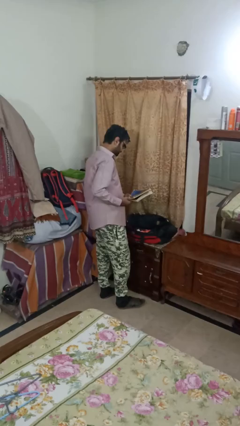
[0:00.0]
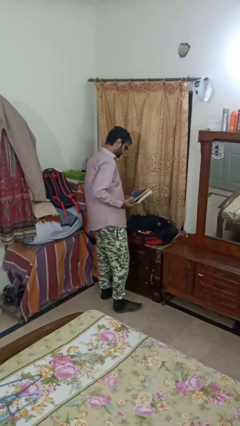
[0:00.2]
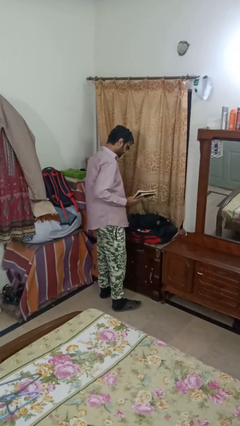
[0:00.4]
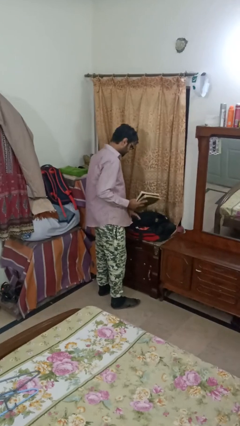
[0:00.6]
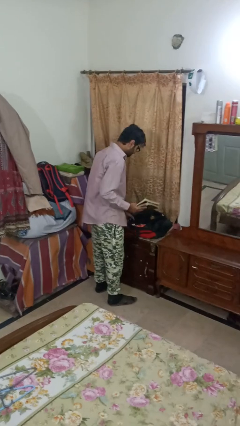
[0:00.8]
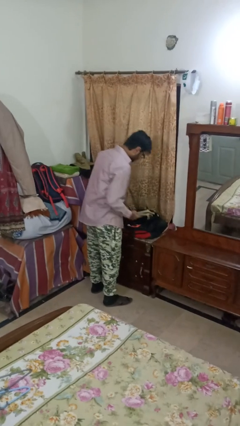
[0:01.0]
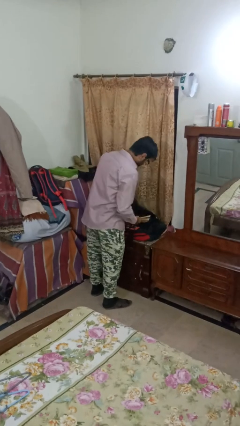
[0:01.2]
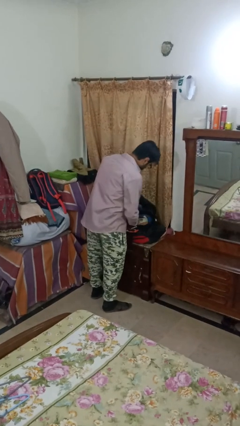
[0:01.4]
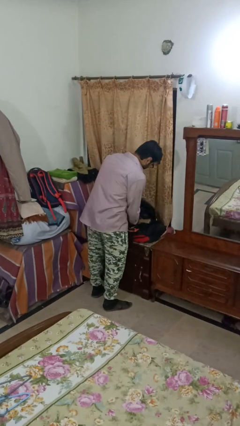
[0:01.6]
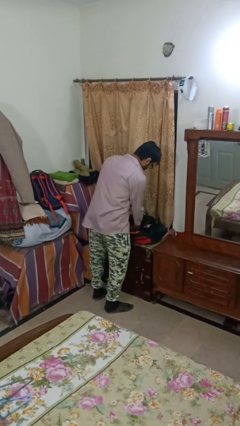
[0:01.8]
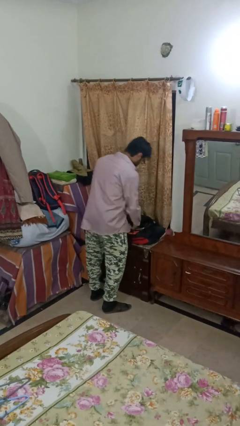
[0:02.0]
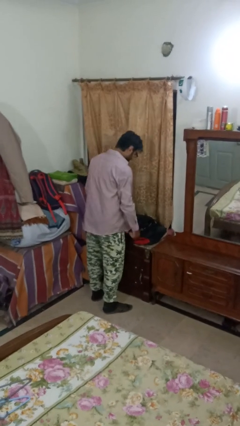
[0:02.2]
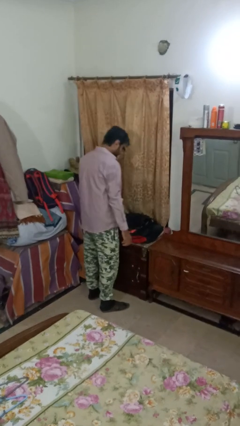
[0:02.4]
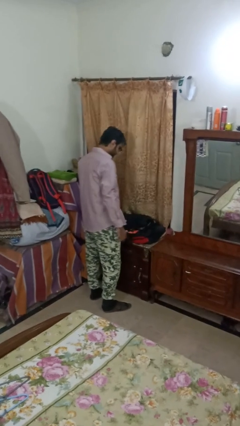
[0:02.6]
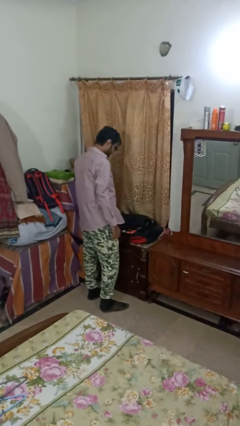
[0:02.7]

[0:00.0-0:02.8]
person puts object into bag

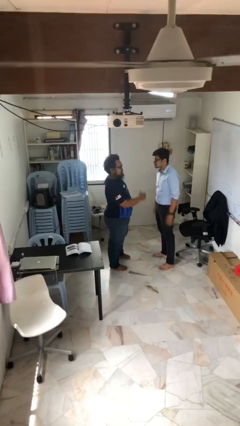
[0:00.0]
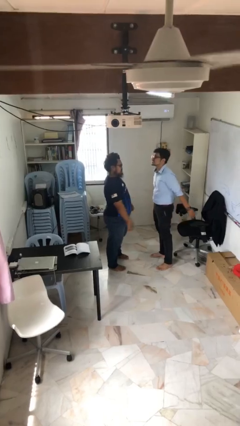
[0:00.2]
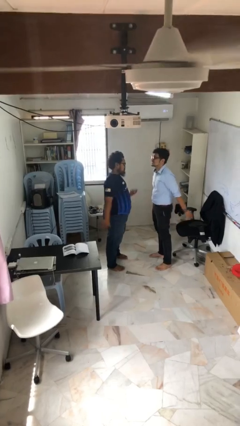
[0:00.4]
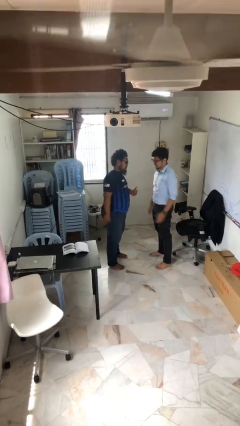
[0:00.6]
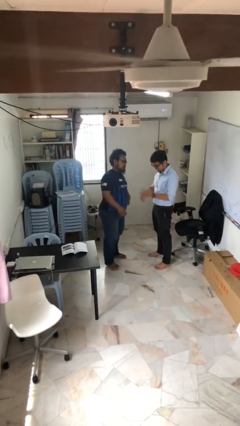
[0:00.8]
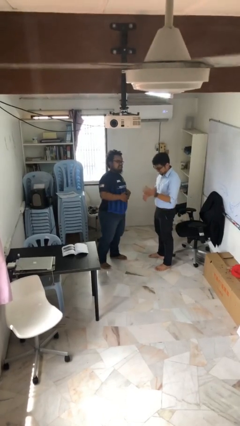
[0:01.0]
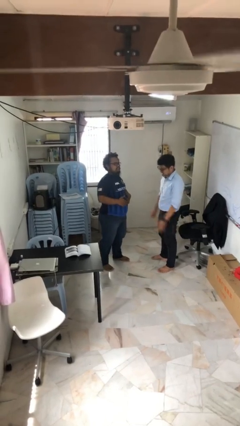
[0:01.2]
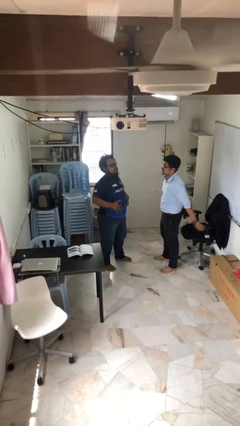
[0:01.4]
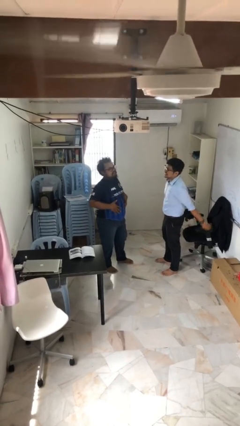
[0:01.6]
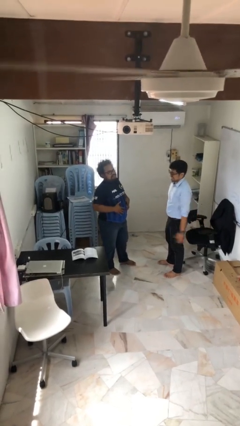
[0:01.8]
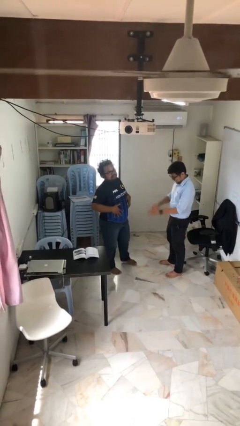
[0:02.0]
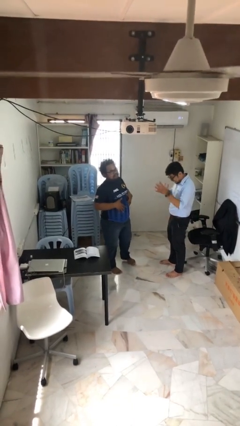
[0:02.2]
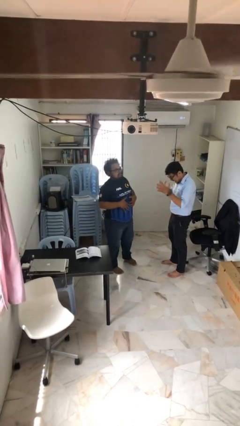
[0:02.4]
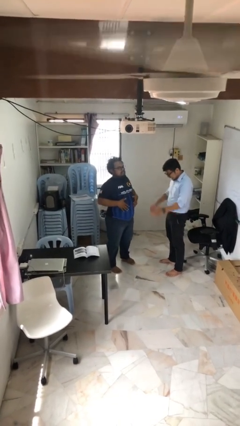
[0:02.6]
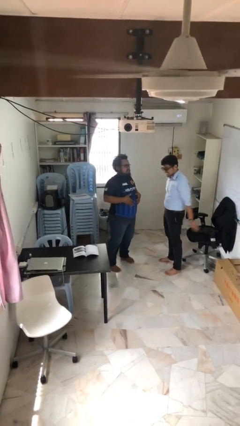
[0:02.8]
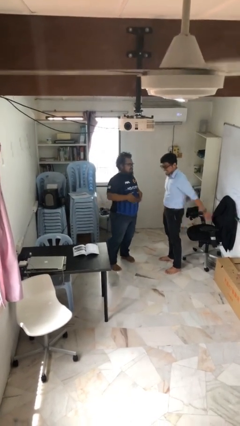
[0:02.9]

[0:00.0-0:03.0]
person talks to person

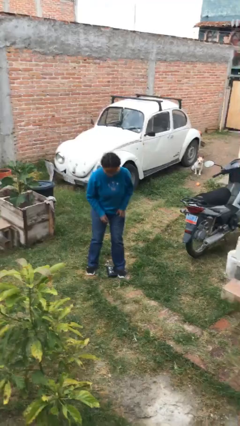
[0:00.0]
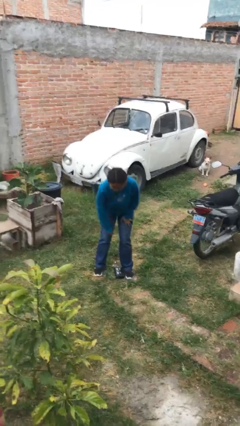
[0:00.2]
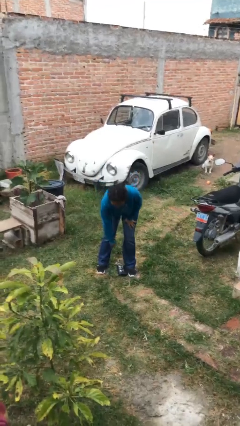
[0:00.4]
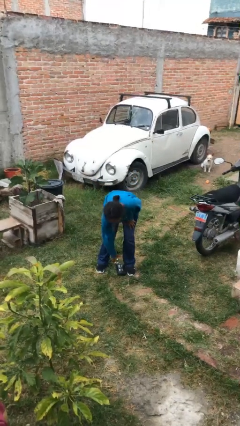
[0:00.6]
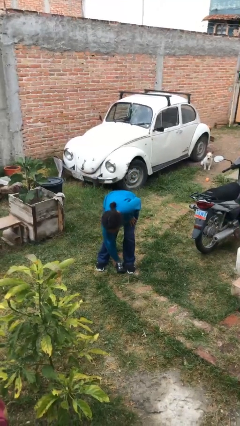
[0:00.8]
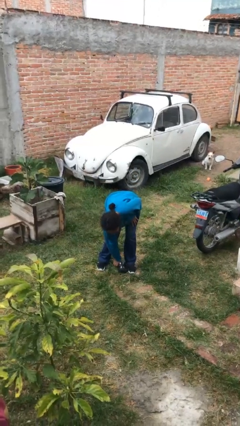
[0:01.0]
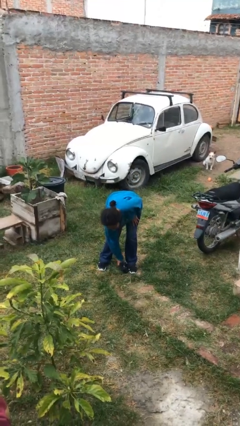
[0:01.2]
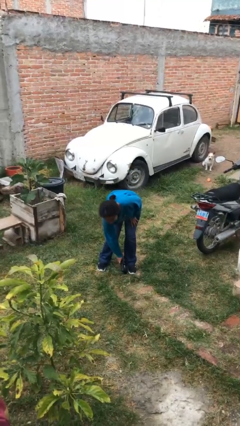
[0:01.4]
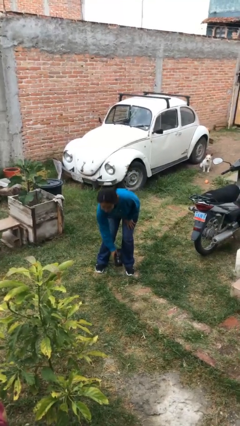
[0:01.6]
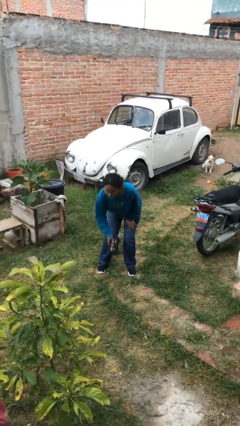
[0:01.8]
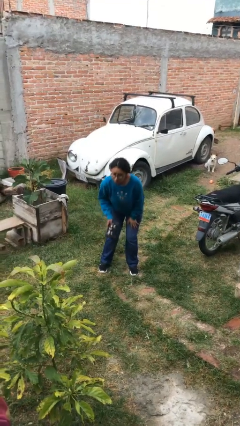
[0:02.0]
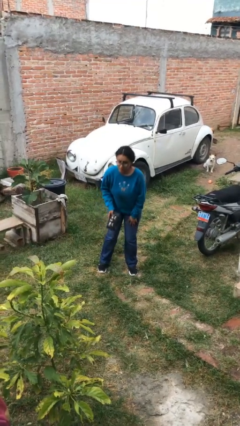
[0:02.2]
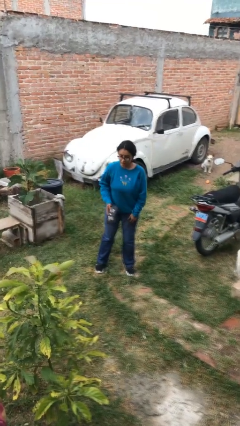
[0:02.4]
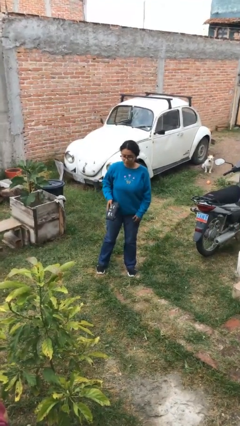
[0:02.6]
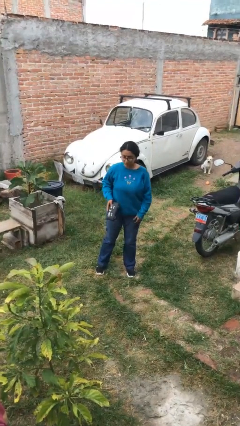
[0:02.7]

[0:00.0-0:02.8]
person picks up object from floor

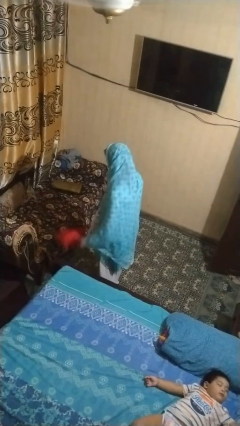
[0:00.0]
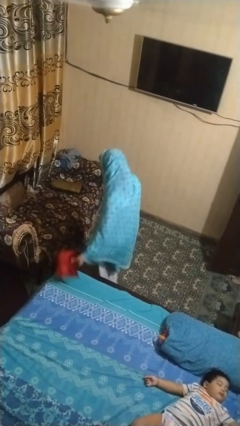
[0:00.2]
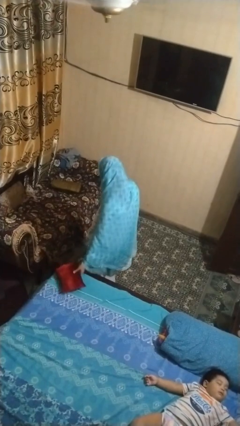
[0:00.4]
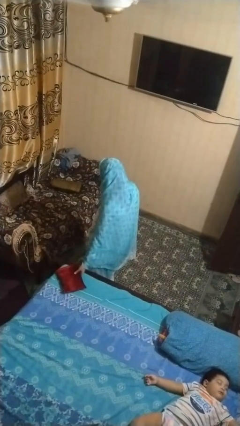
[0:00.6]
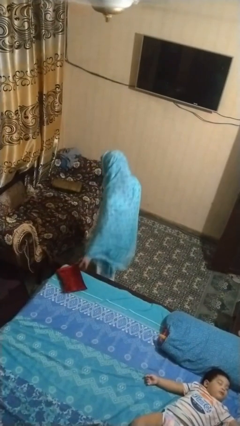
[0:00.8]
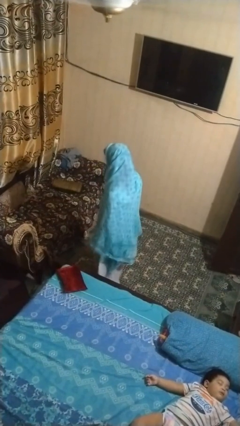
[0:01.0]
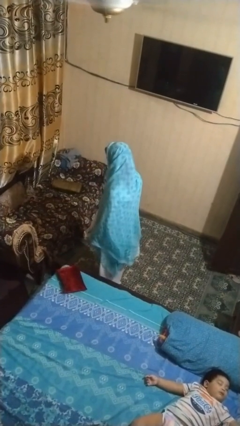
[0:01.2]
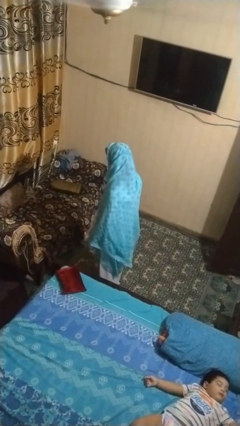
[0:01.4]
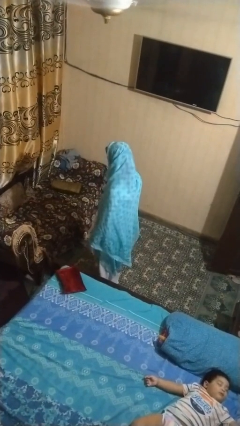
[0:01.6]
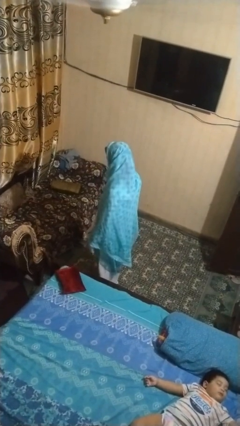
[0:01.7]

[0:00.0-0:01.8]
person puts down object on bed

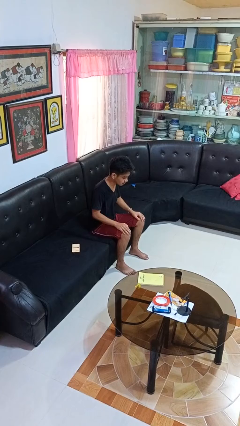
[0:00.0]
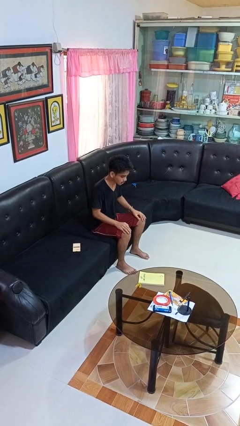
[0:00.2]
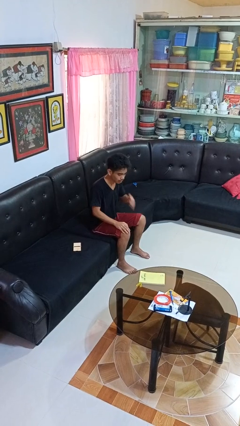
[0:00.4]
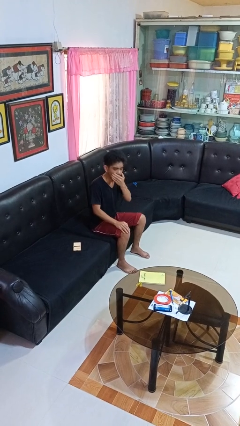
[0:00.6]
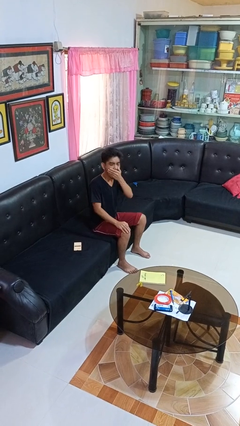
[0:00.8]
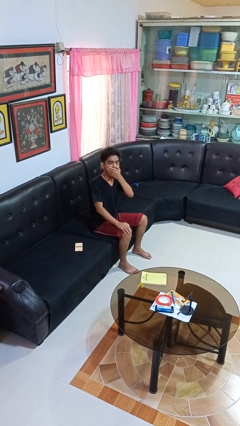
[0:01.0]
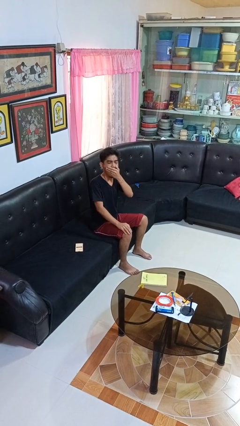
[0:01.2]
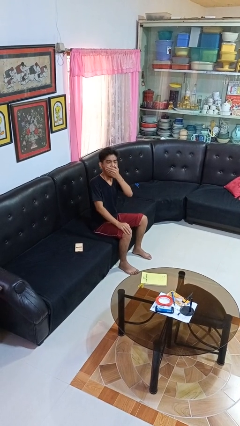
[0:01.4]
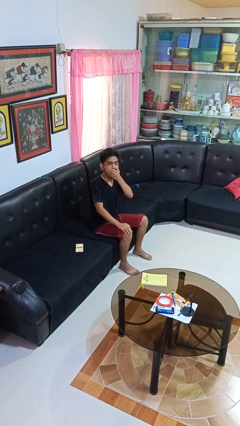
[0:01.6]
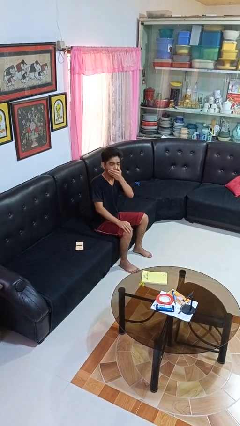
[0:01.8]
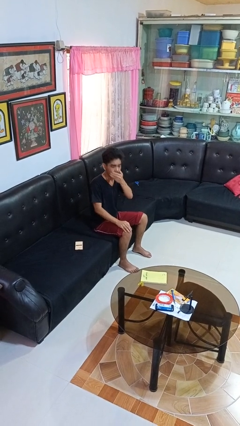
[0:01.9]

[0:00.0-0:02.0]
person yawns

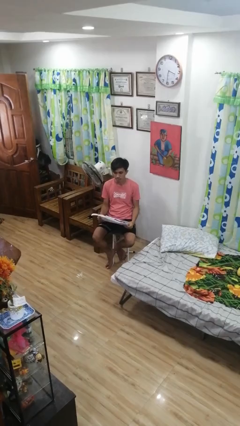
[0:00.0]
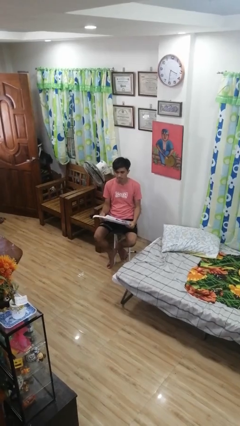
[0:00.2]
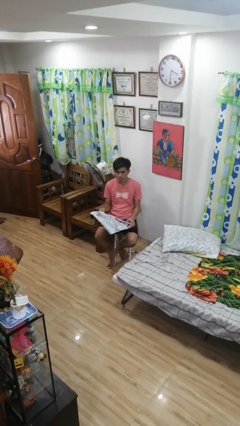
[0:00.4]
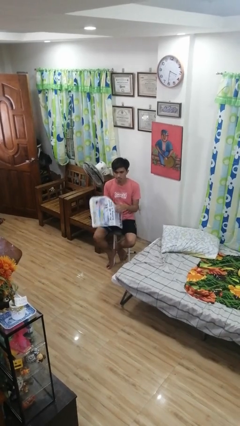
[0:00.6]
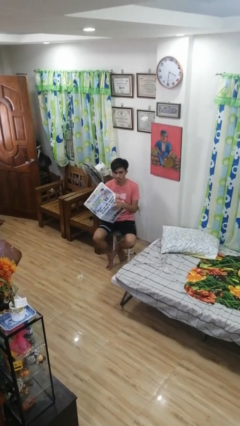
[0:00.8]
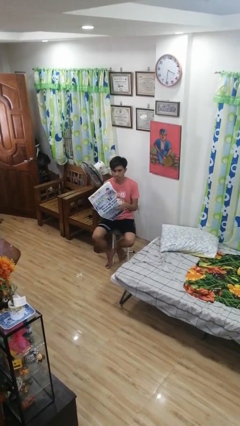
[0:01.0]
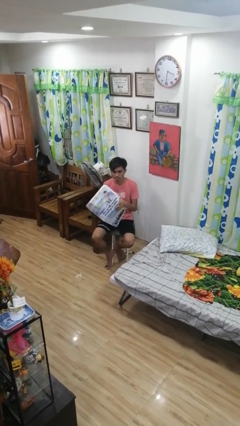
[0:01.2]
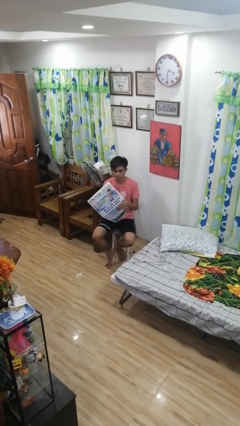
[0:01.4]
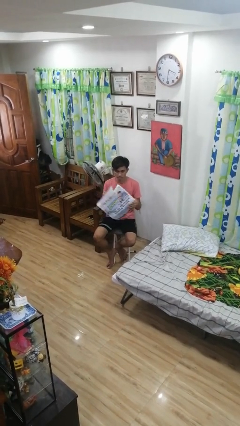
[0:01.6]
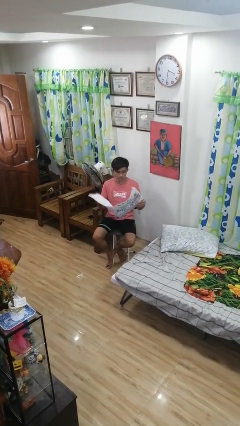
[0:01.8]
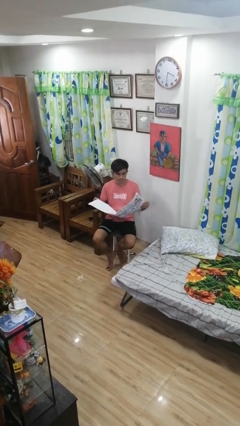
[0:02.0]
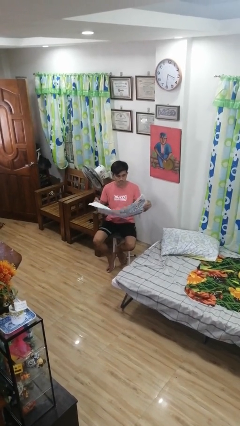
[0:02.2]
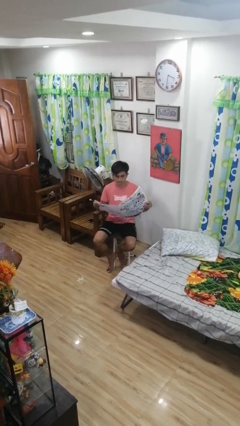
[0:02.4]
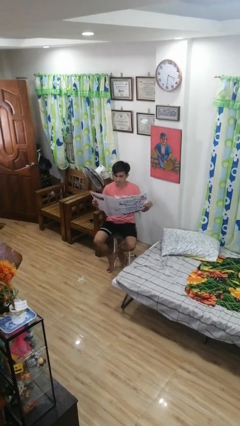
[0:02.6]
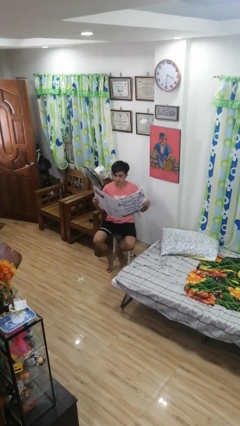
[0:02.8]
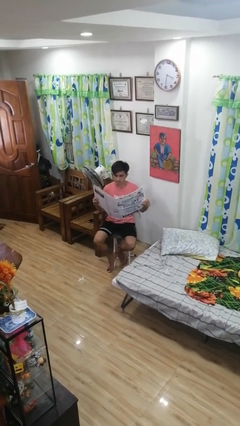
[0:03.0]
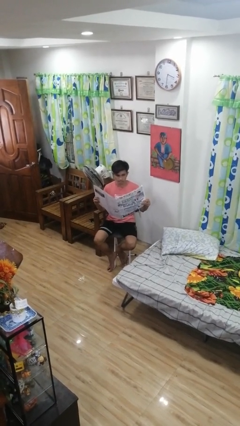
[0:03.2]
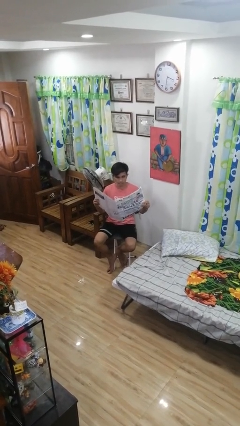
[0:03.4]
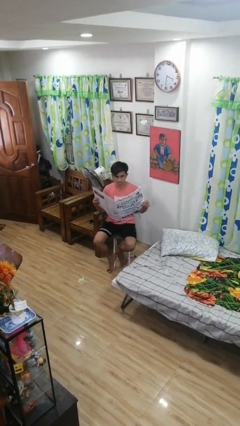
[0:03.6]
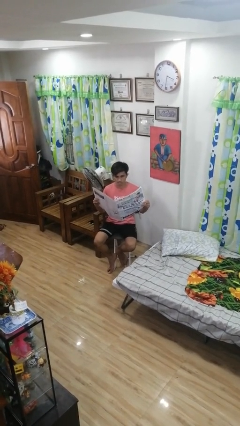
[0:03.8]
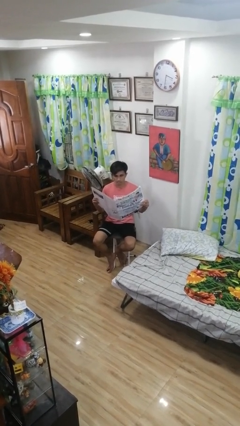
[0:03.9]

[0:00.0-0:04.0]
person reads newspaper

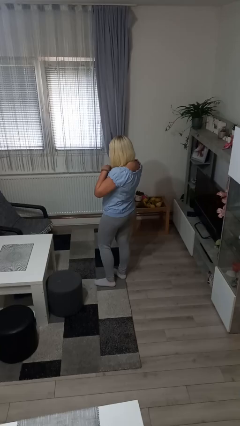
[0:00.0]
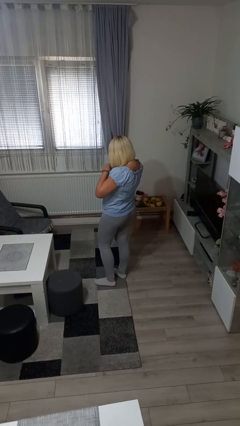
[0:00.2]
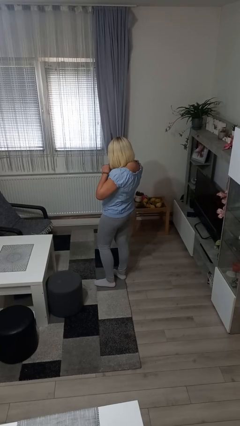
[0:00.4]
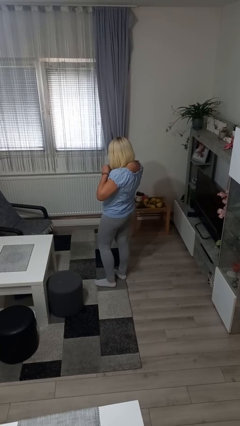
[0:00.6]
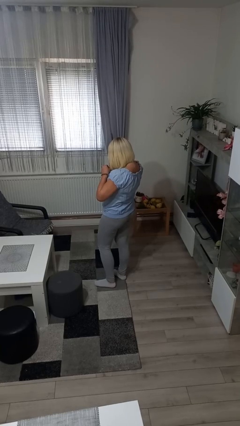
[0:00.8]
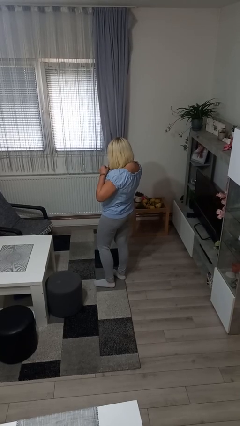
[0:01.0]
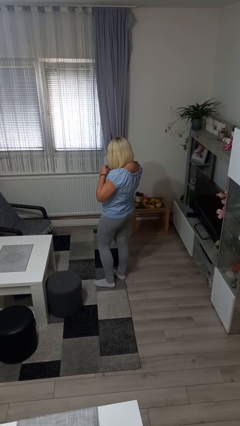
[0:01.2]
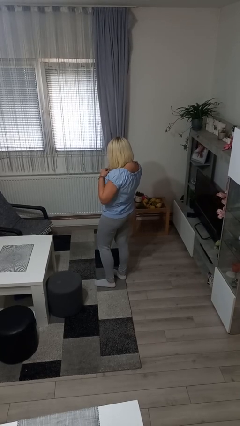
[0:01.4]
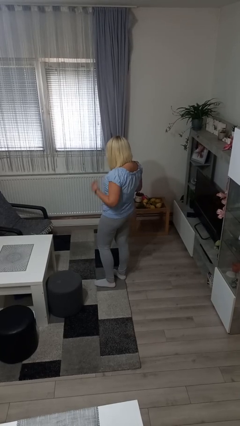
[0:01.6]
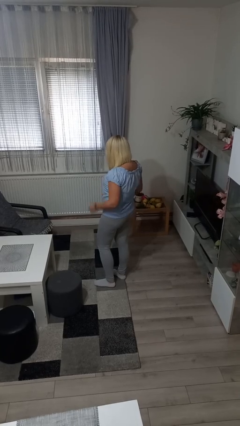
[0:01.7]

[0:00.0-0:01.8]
person unbuttons shirt
